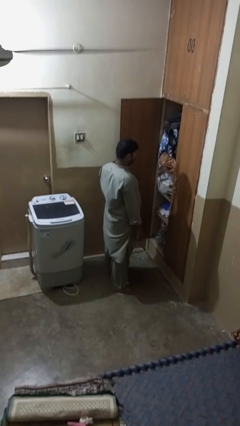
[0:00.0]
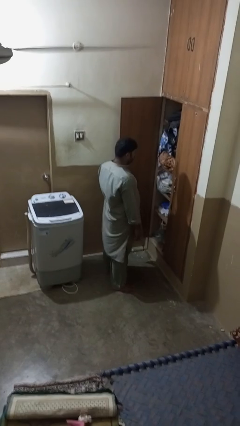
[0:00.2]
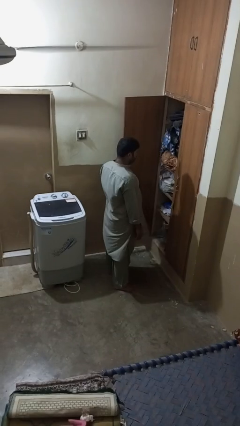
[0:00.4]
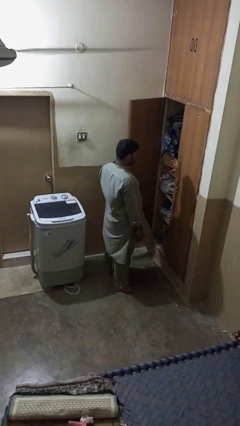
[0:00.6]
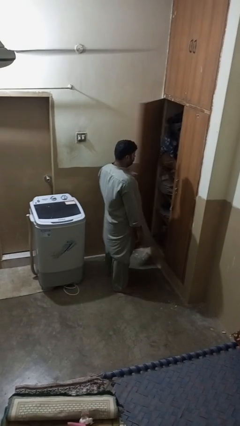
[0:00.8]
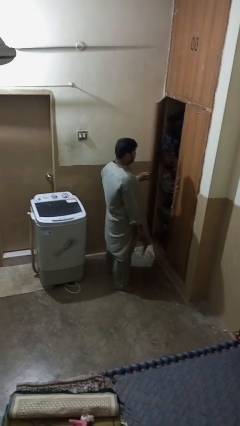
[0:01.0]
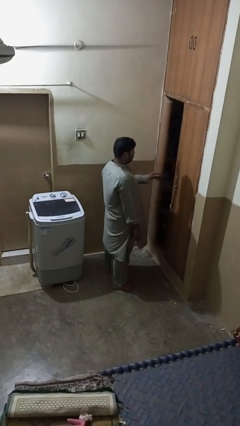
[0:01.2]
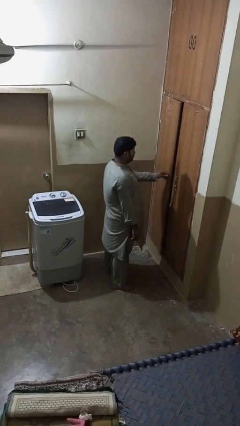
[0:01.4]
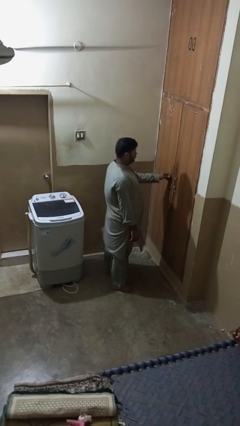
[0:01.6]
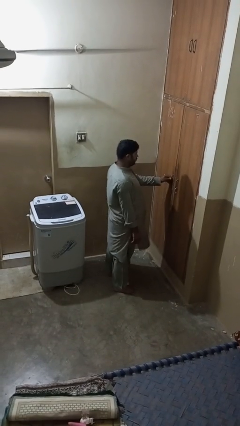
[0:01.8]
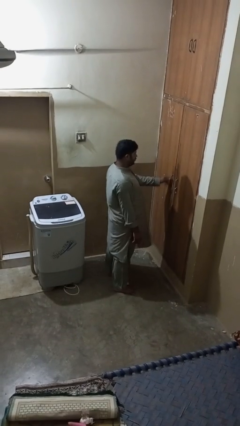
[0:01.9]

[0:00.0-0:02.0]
person closes closet door

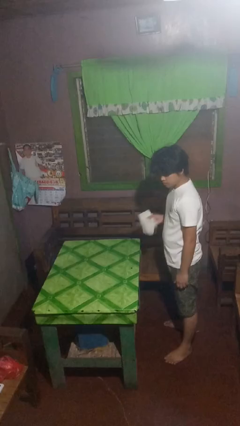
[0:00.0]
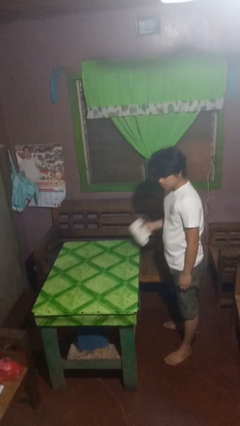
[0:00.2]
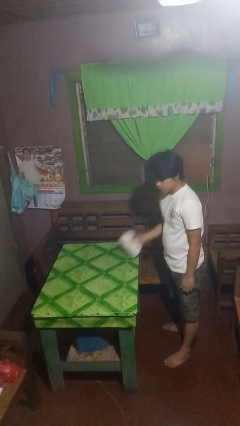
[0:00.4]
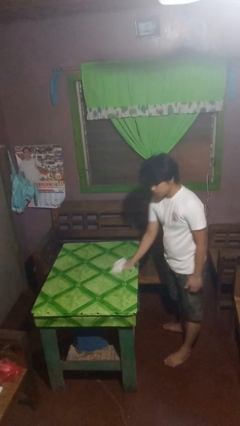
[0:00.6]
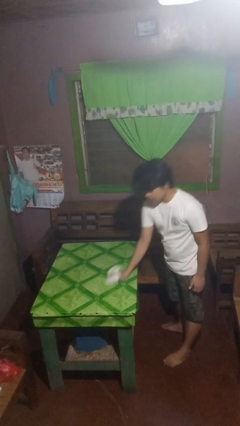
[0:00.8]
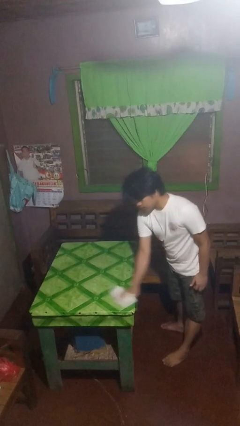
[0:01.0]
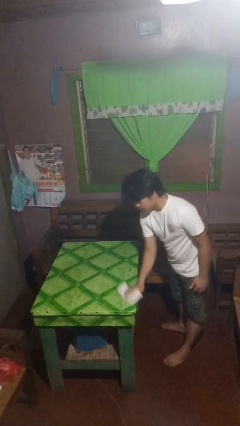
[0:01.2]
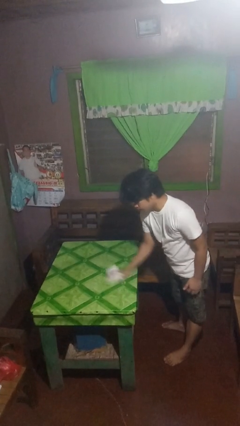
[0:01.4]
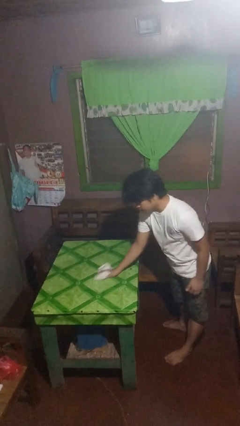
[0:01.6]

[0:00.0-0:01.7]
person cleans table with rag

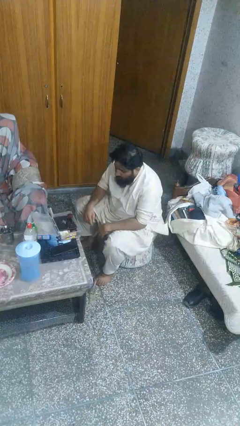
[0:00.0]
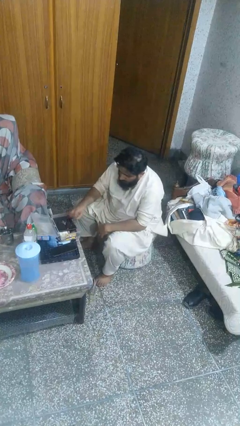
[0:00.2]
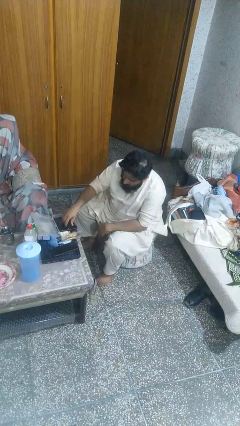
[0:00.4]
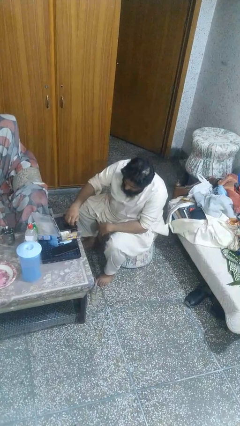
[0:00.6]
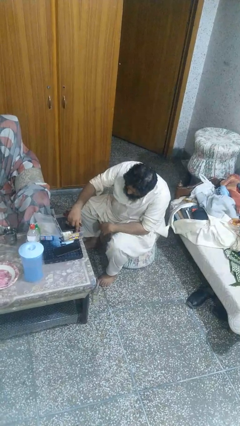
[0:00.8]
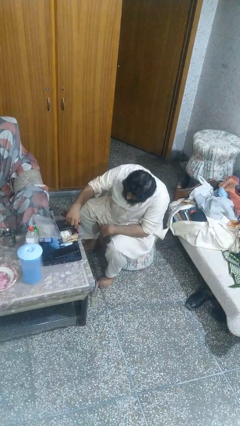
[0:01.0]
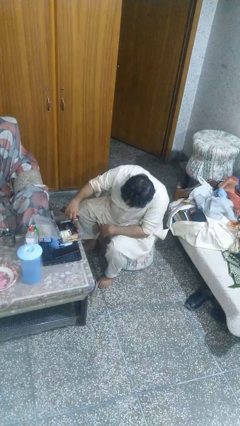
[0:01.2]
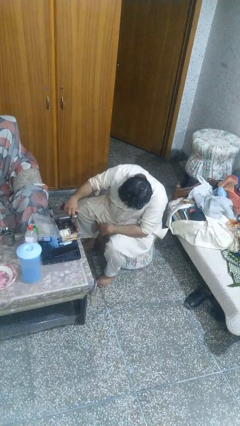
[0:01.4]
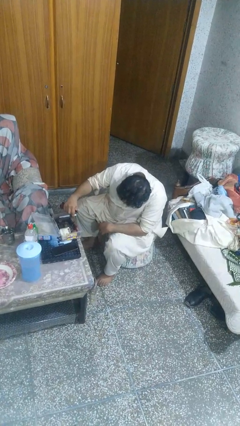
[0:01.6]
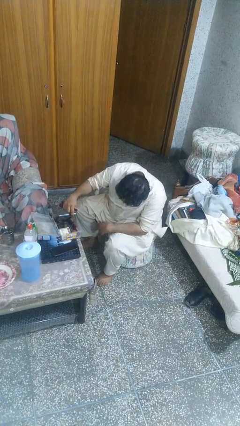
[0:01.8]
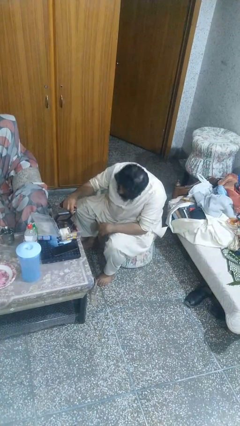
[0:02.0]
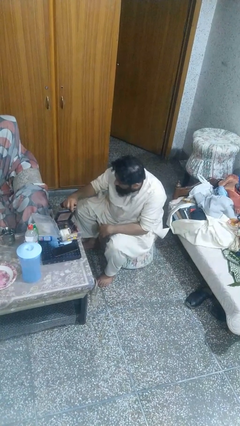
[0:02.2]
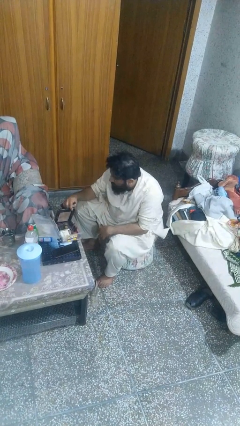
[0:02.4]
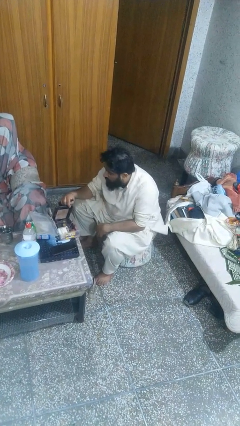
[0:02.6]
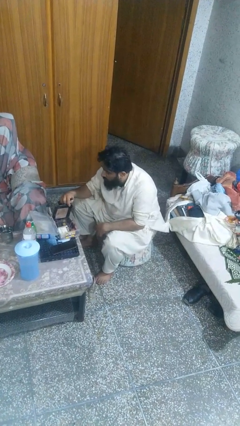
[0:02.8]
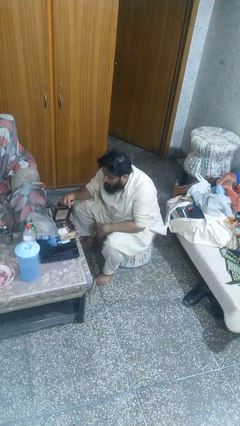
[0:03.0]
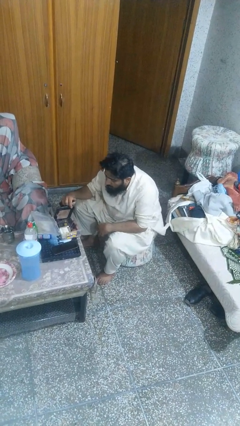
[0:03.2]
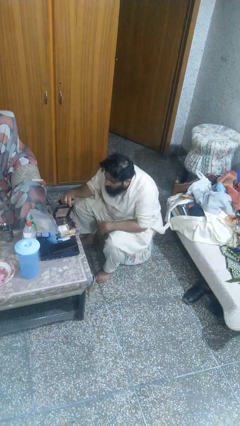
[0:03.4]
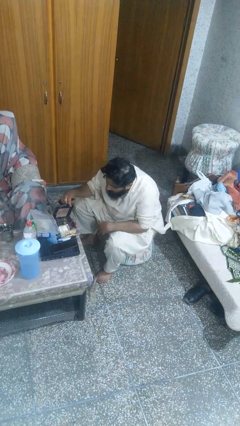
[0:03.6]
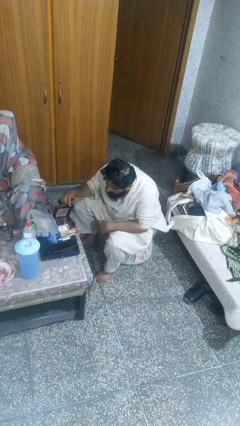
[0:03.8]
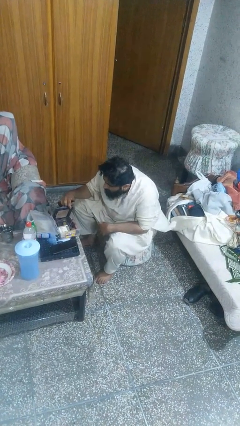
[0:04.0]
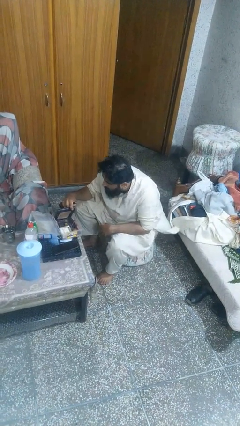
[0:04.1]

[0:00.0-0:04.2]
person searches jewelry box

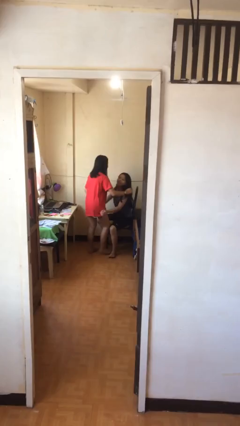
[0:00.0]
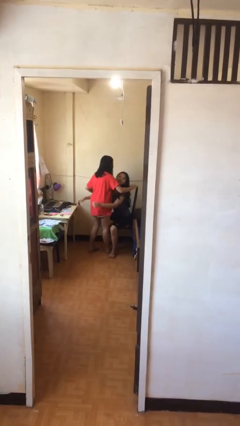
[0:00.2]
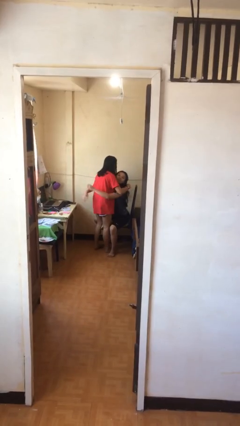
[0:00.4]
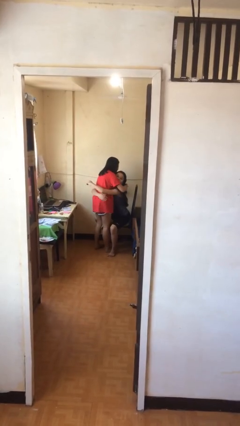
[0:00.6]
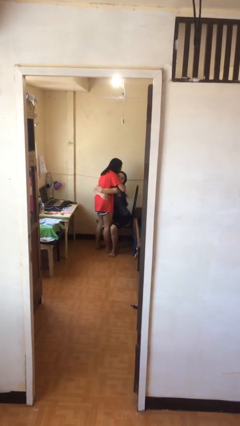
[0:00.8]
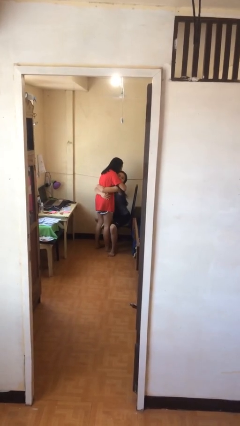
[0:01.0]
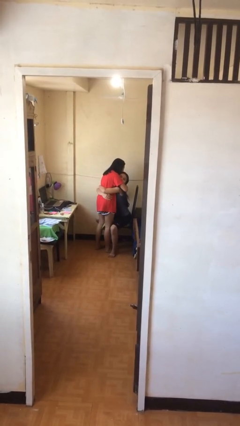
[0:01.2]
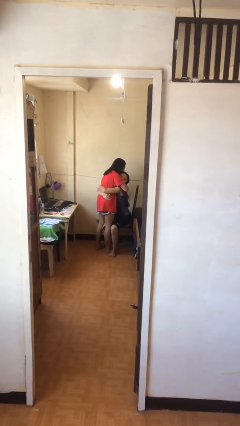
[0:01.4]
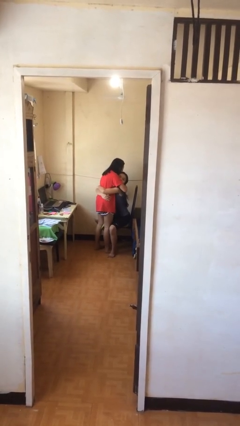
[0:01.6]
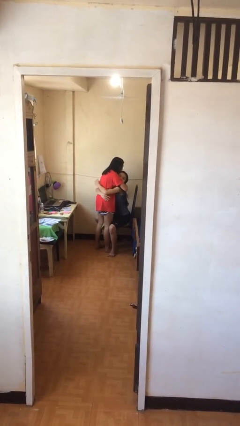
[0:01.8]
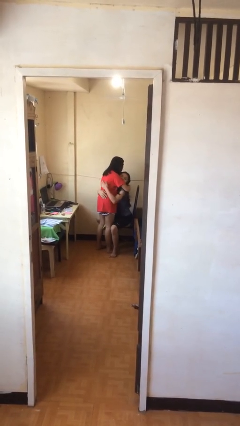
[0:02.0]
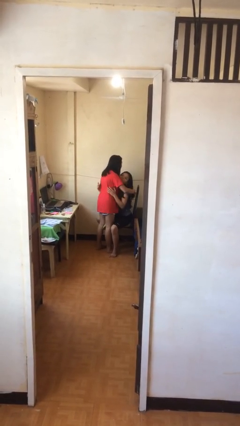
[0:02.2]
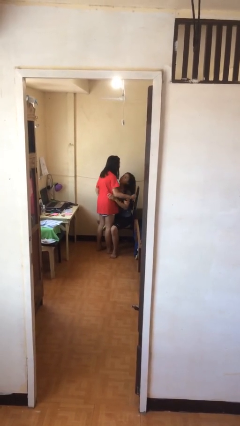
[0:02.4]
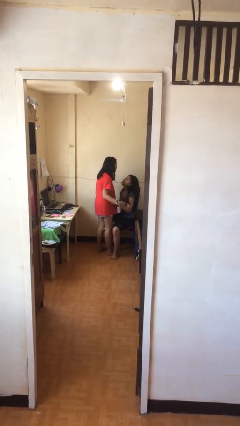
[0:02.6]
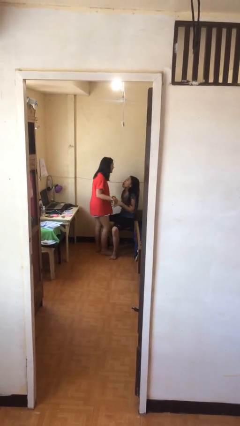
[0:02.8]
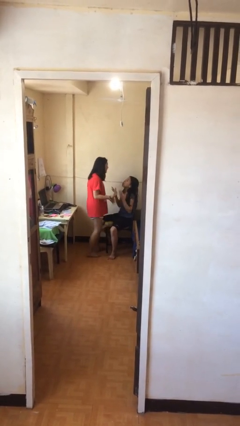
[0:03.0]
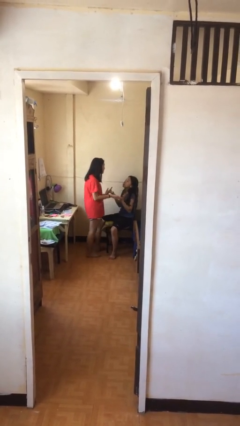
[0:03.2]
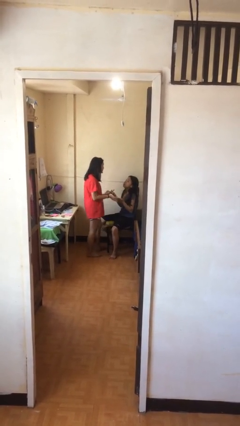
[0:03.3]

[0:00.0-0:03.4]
person embraces person

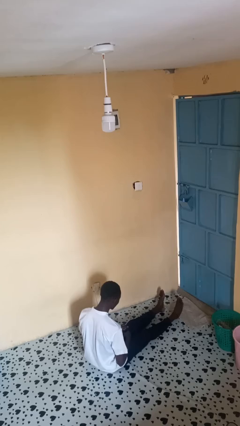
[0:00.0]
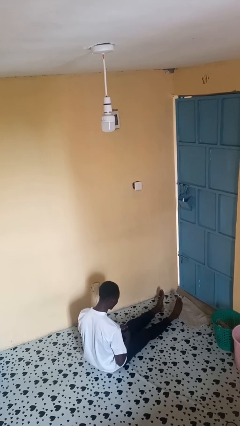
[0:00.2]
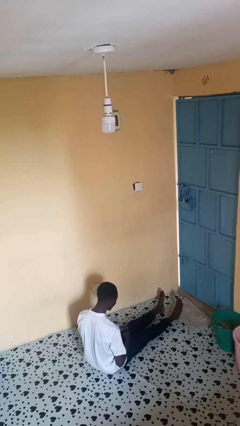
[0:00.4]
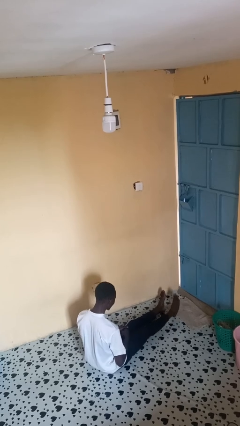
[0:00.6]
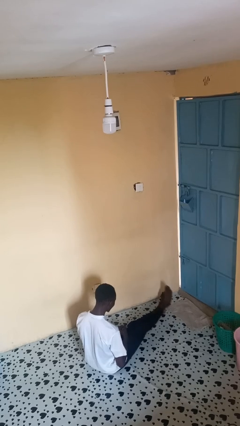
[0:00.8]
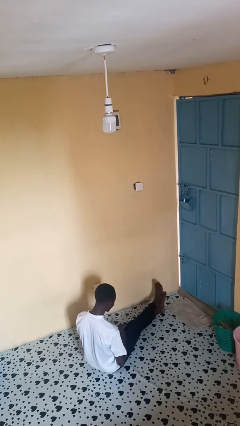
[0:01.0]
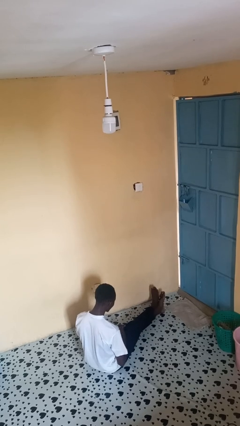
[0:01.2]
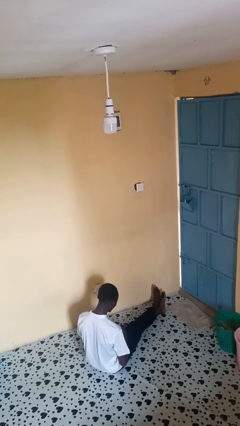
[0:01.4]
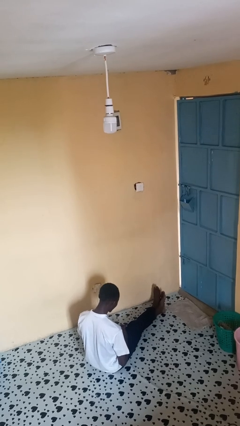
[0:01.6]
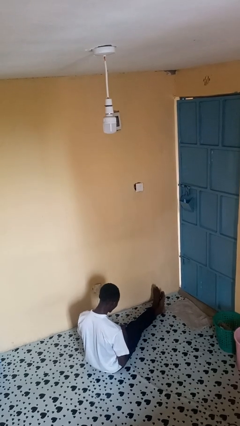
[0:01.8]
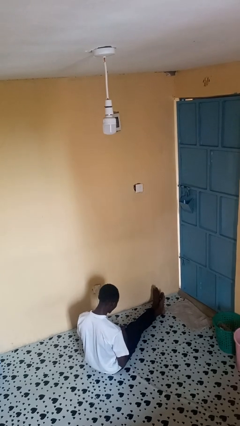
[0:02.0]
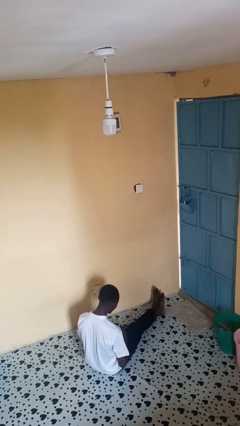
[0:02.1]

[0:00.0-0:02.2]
person crosses legs

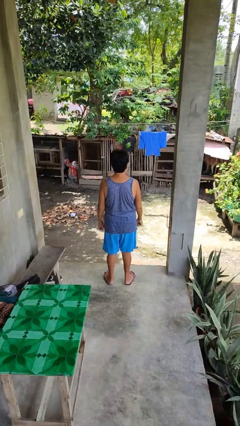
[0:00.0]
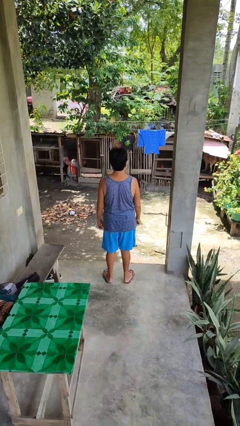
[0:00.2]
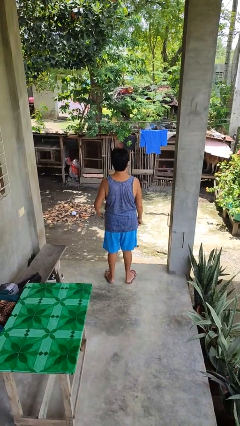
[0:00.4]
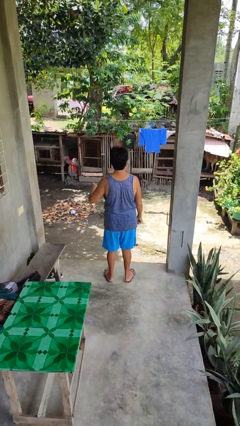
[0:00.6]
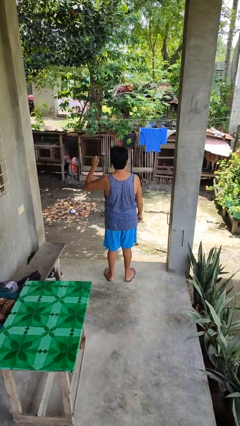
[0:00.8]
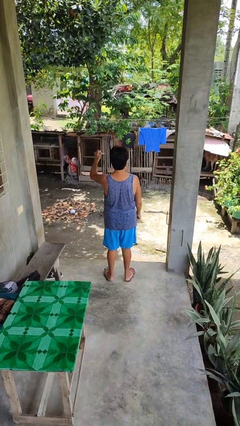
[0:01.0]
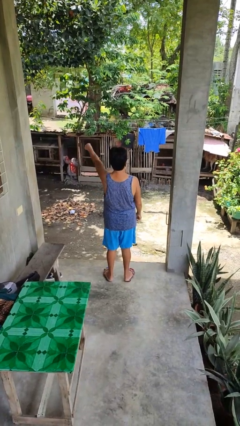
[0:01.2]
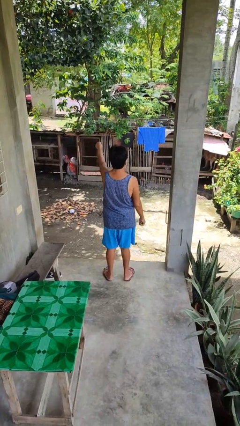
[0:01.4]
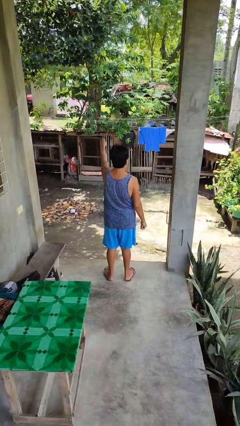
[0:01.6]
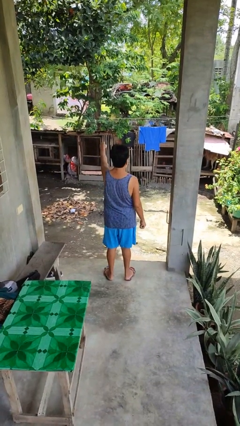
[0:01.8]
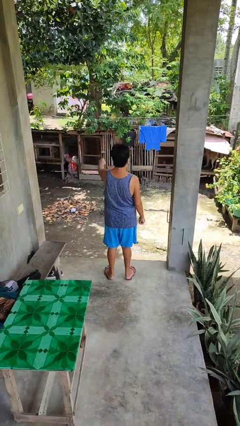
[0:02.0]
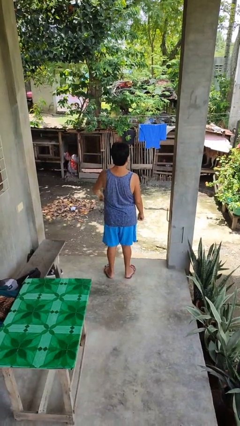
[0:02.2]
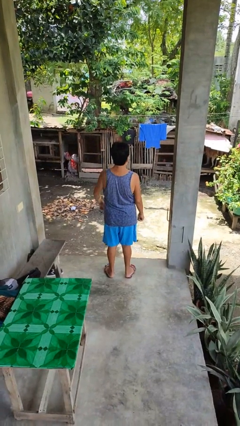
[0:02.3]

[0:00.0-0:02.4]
person punches

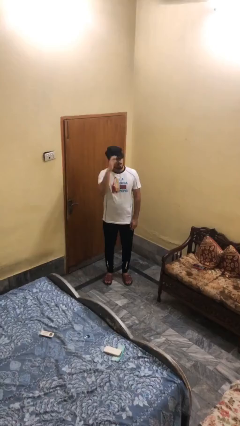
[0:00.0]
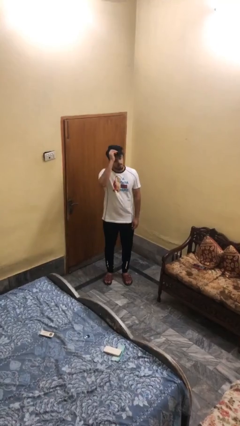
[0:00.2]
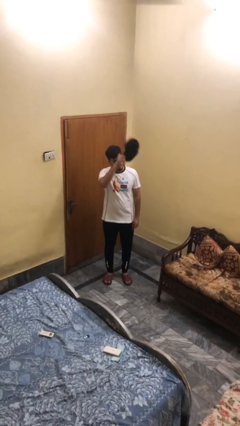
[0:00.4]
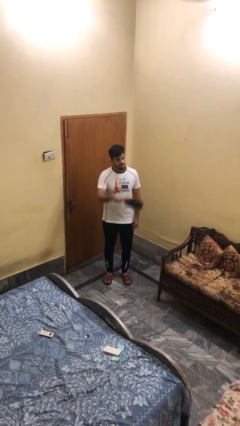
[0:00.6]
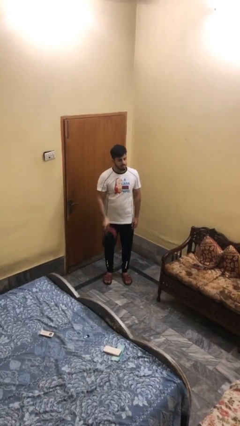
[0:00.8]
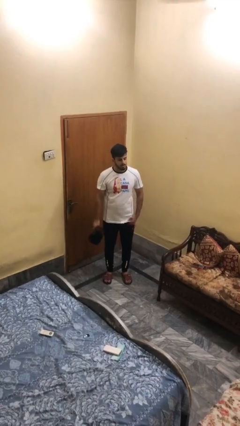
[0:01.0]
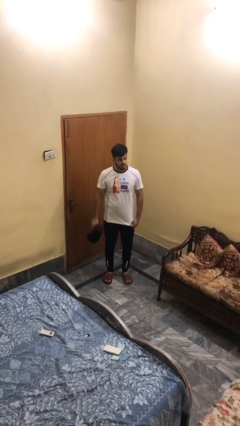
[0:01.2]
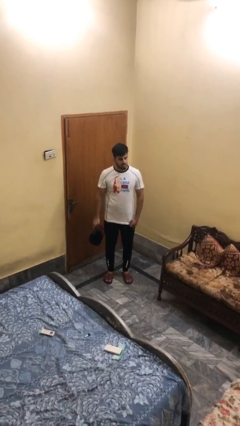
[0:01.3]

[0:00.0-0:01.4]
person takes off hat

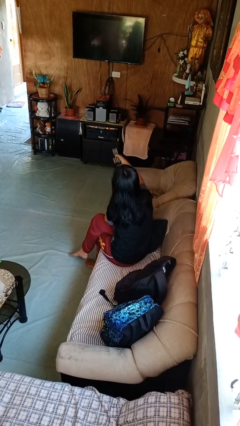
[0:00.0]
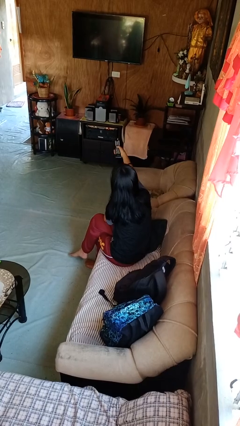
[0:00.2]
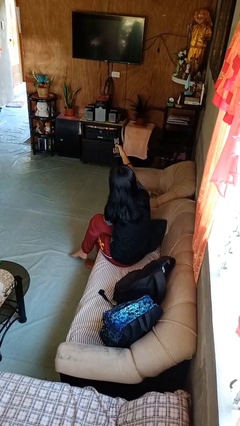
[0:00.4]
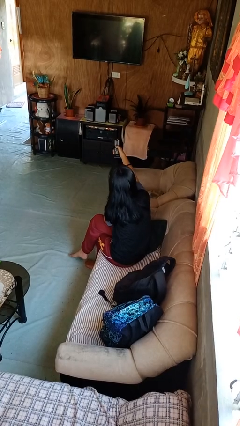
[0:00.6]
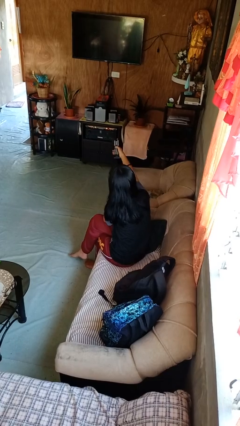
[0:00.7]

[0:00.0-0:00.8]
person uses television remote
